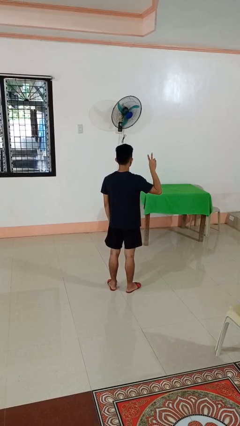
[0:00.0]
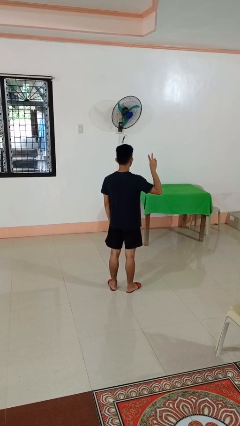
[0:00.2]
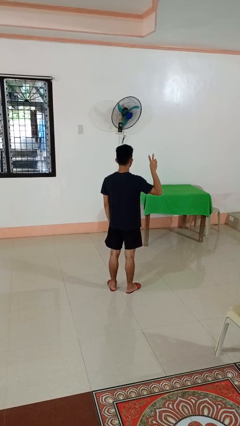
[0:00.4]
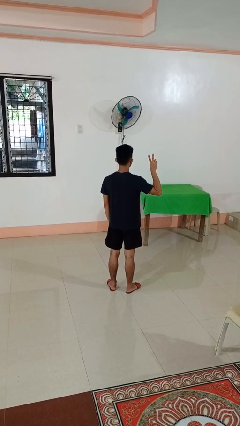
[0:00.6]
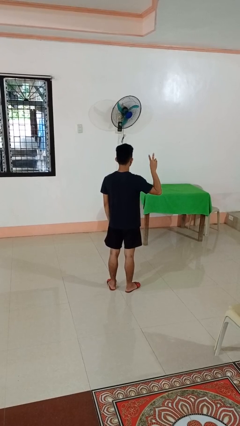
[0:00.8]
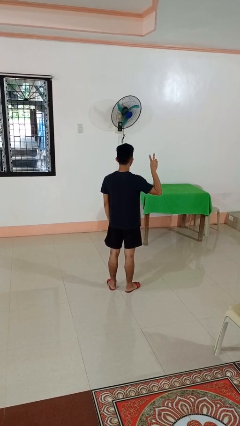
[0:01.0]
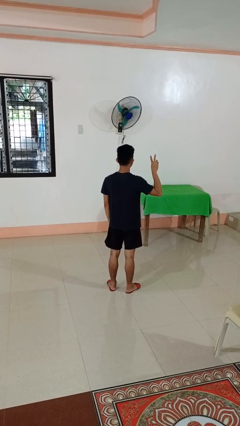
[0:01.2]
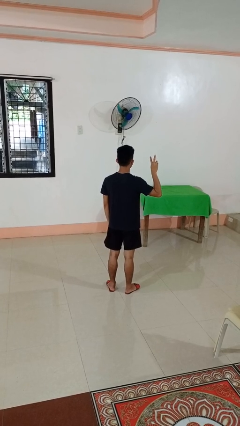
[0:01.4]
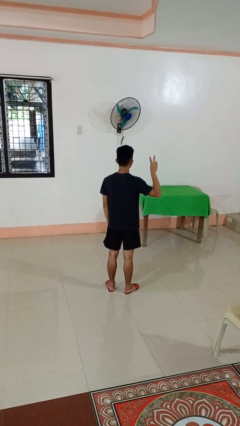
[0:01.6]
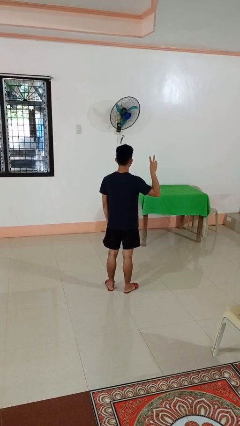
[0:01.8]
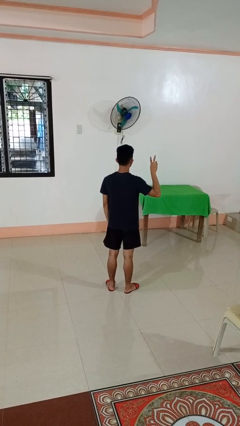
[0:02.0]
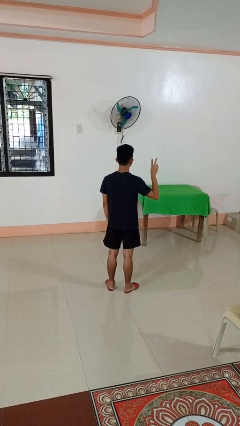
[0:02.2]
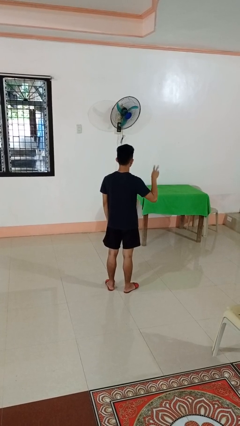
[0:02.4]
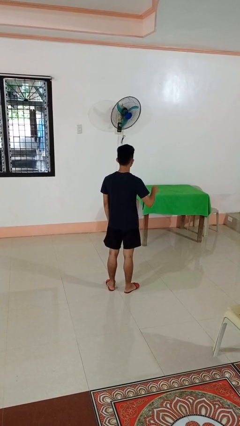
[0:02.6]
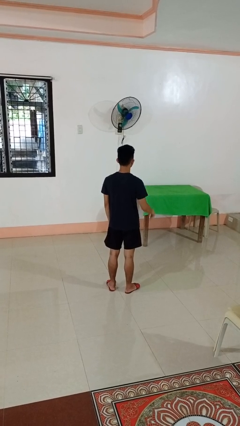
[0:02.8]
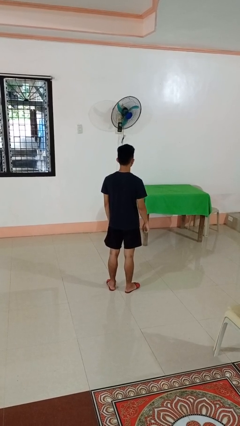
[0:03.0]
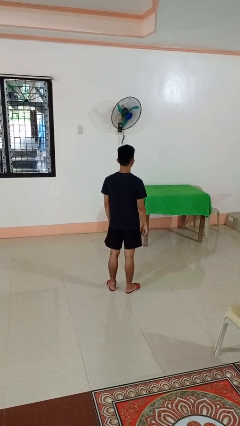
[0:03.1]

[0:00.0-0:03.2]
person gestures peace

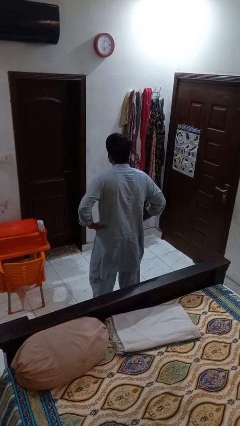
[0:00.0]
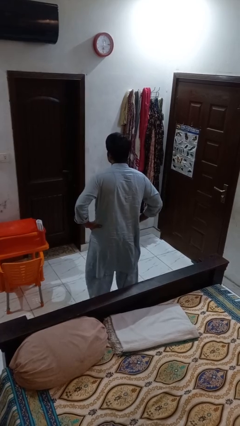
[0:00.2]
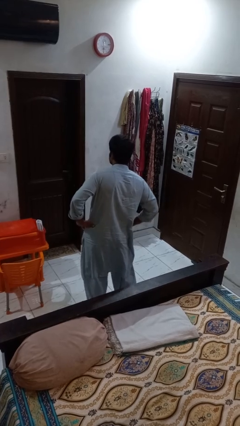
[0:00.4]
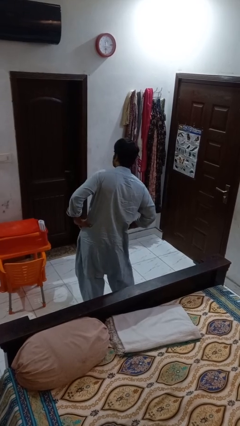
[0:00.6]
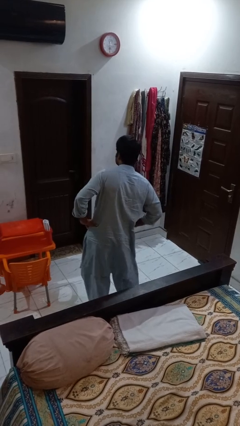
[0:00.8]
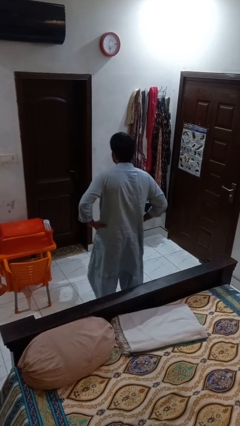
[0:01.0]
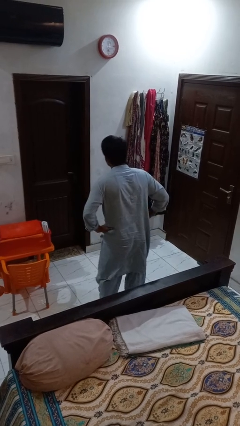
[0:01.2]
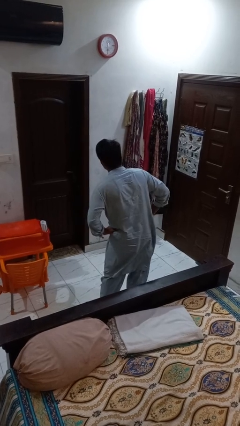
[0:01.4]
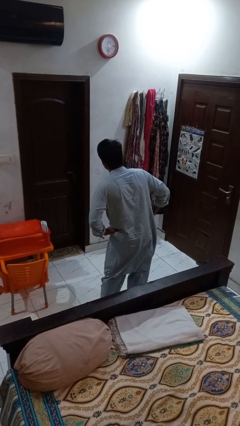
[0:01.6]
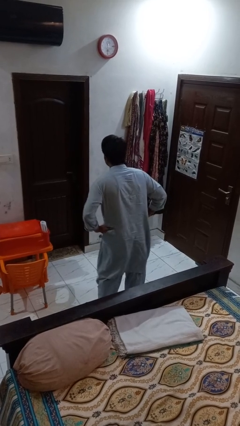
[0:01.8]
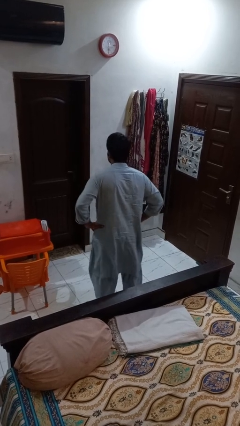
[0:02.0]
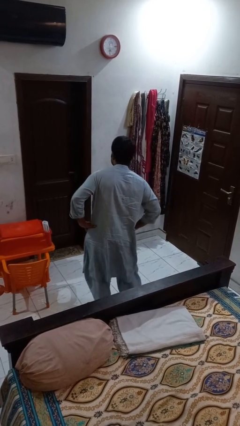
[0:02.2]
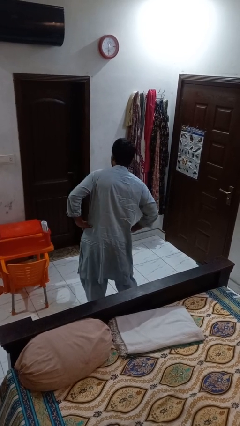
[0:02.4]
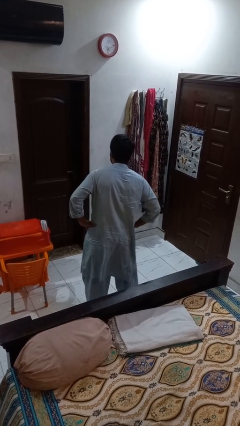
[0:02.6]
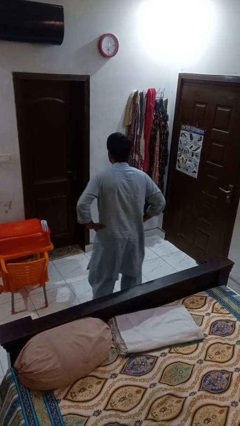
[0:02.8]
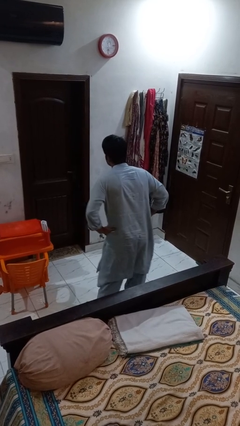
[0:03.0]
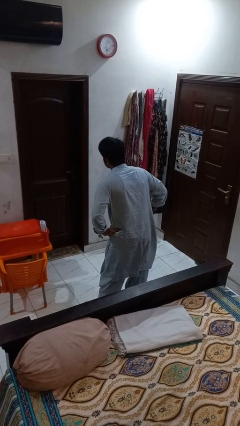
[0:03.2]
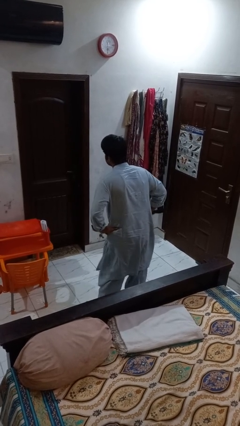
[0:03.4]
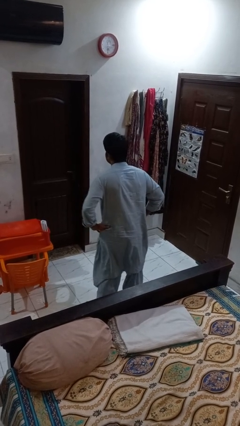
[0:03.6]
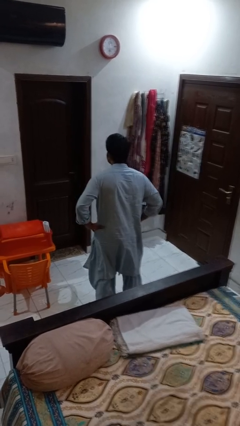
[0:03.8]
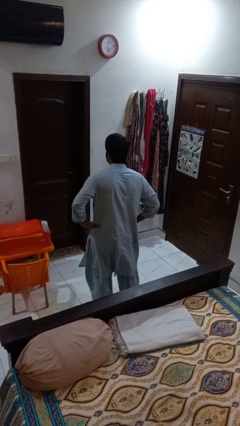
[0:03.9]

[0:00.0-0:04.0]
person wiggles hips

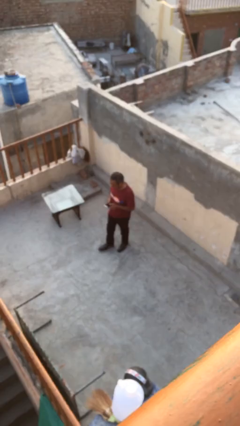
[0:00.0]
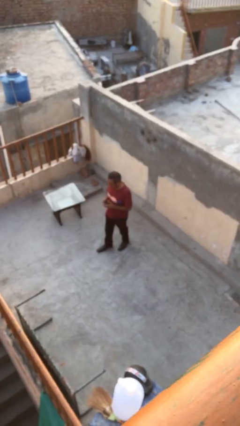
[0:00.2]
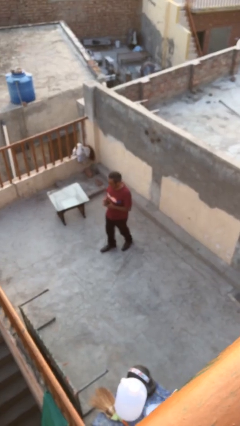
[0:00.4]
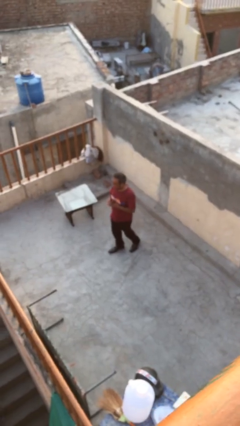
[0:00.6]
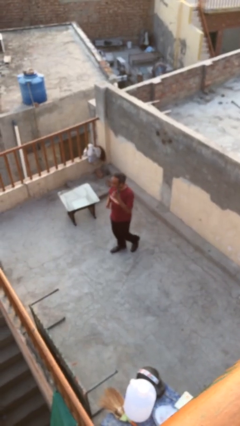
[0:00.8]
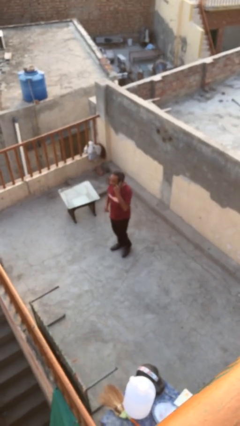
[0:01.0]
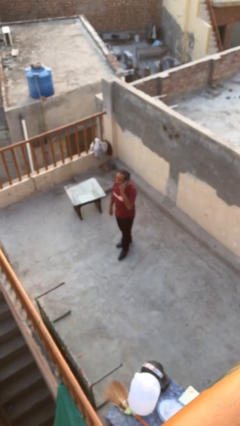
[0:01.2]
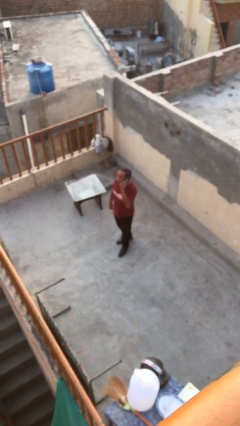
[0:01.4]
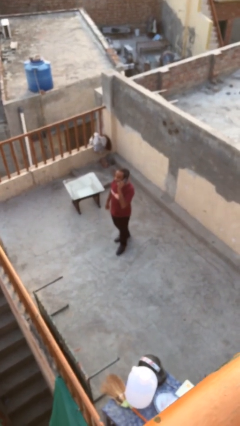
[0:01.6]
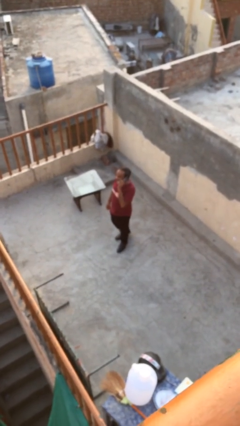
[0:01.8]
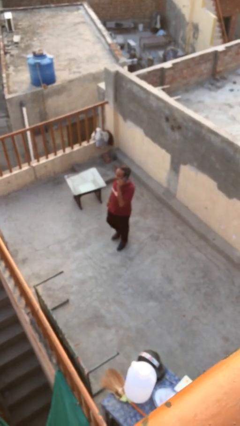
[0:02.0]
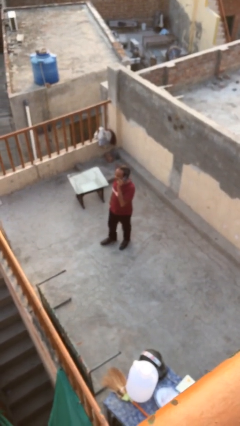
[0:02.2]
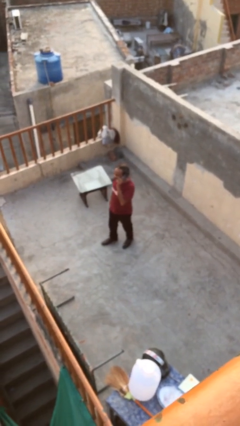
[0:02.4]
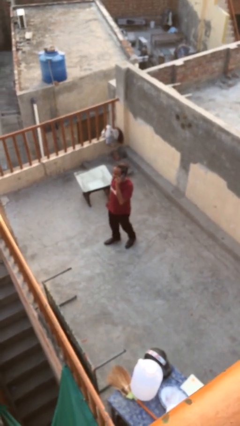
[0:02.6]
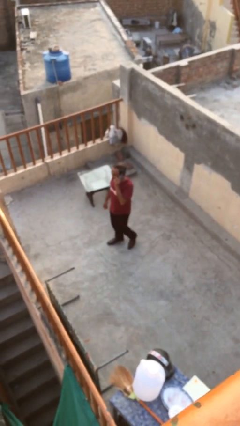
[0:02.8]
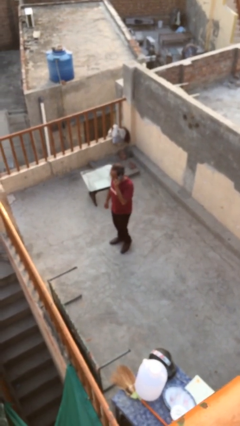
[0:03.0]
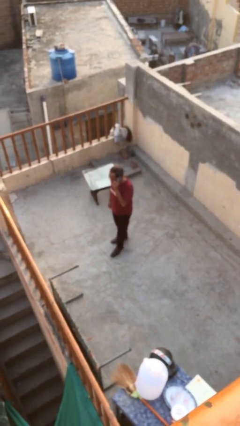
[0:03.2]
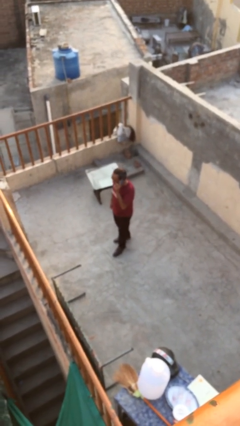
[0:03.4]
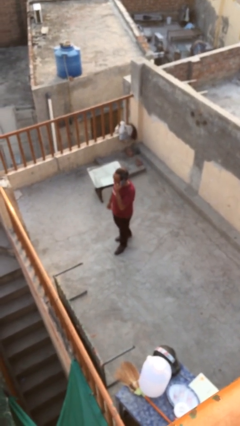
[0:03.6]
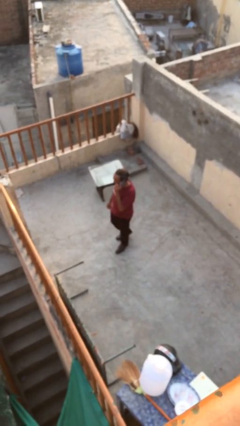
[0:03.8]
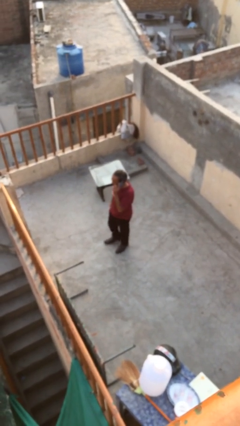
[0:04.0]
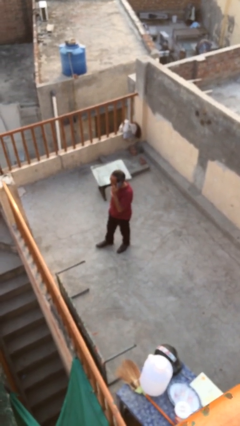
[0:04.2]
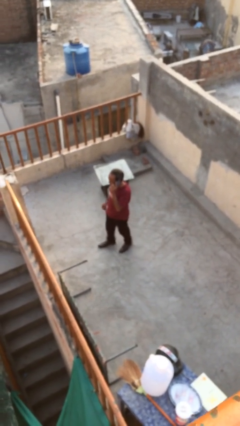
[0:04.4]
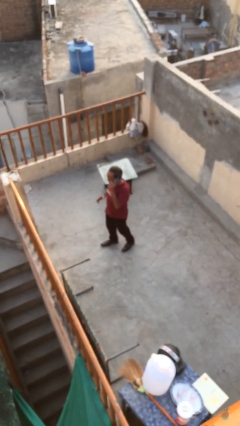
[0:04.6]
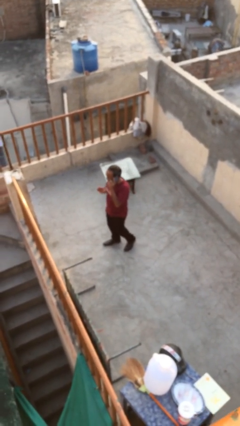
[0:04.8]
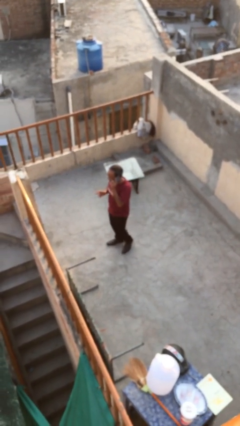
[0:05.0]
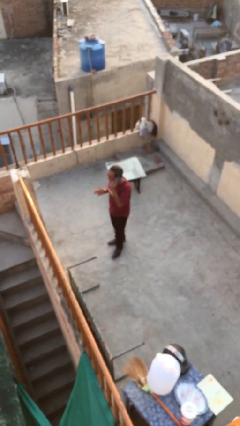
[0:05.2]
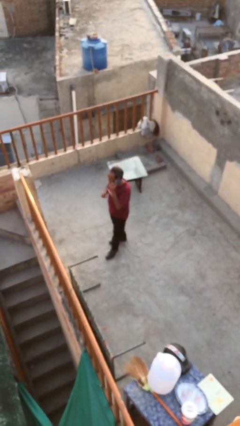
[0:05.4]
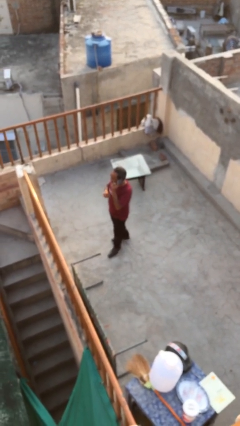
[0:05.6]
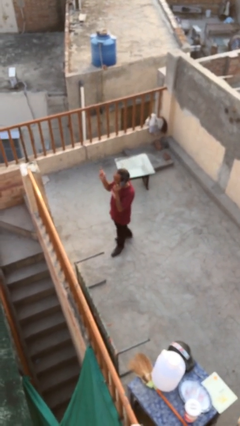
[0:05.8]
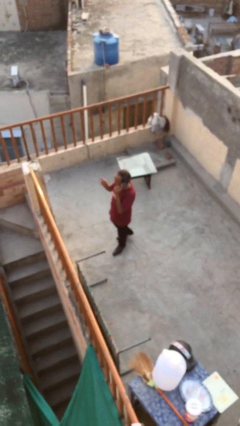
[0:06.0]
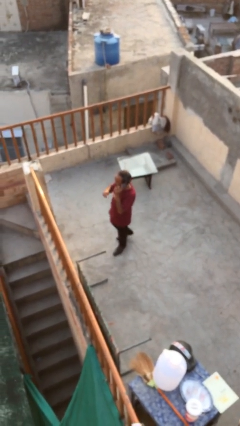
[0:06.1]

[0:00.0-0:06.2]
person talks on phone

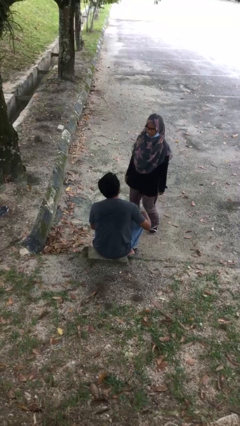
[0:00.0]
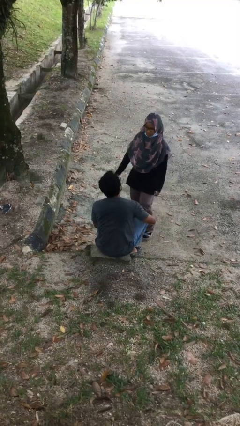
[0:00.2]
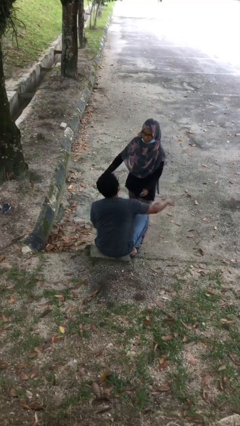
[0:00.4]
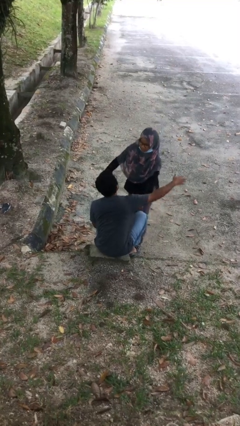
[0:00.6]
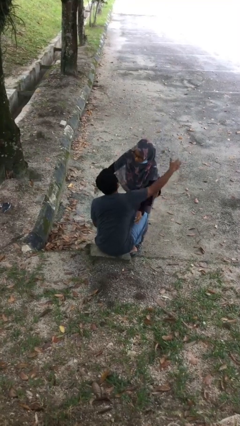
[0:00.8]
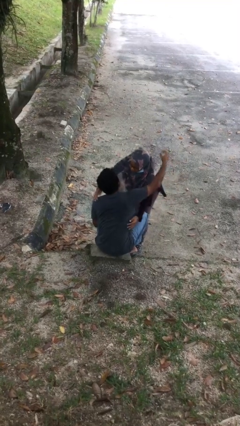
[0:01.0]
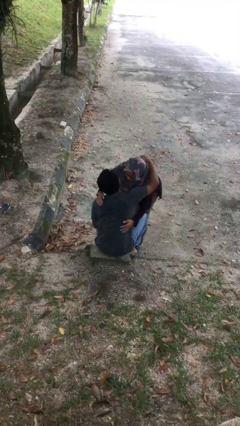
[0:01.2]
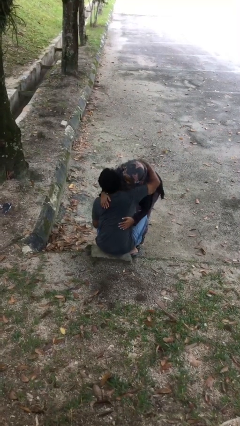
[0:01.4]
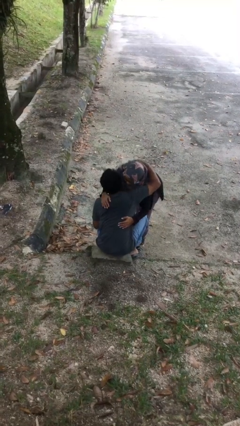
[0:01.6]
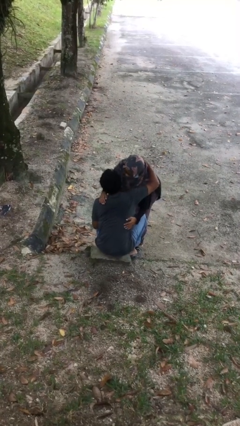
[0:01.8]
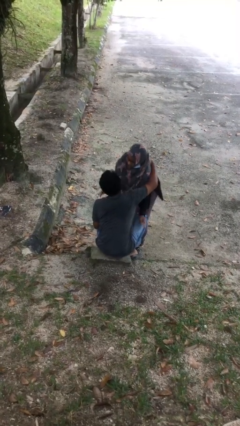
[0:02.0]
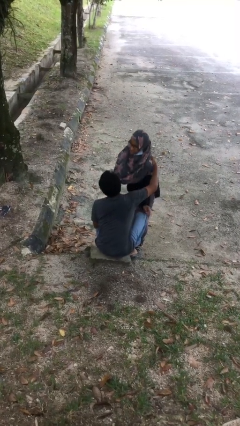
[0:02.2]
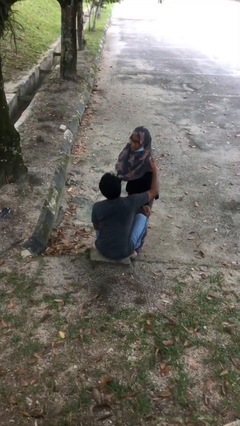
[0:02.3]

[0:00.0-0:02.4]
person embraces person

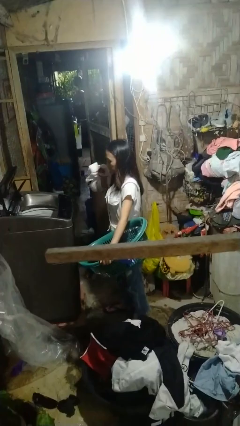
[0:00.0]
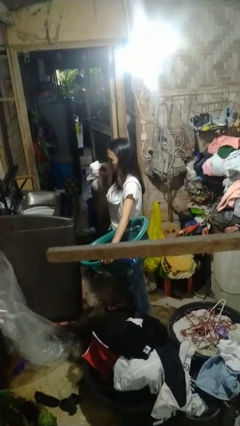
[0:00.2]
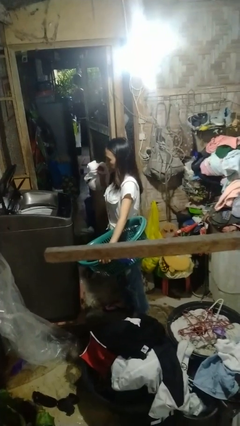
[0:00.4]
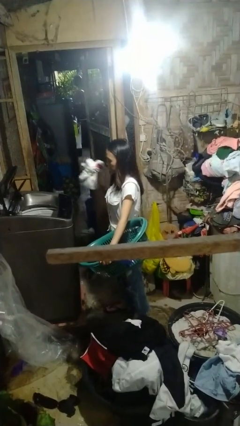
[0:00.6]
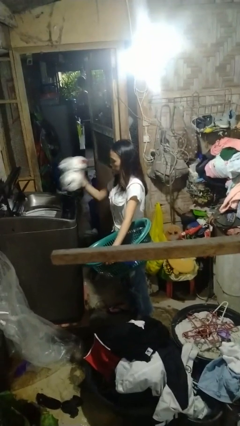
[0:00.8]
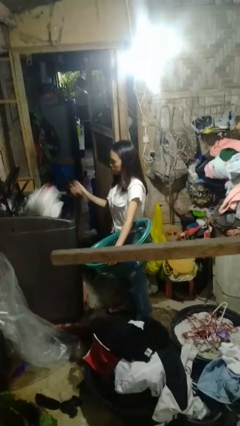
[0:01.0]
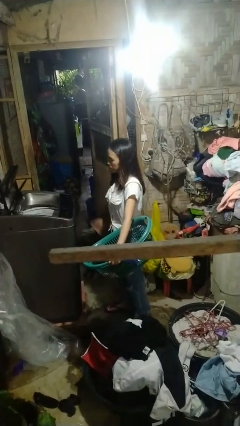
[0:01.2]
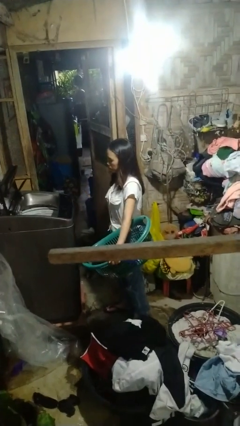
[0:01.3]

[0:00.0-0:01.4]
person loads dryer
